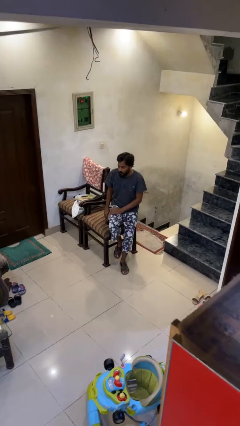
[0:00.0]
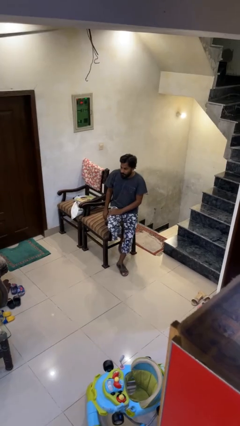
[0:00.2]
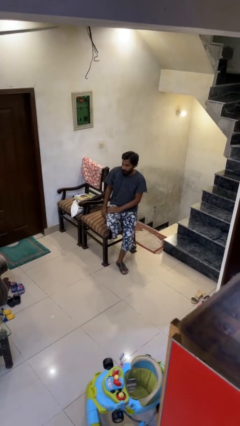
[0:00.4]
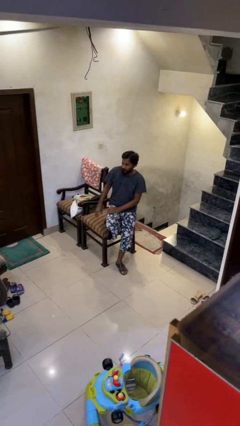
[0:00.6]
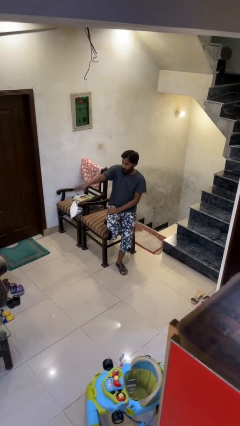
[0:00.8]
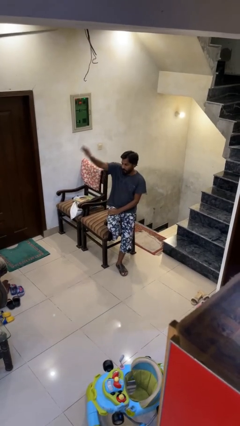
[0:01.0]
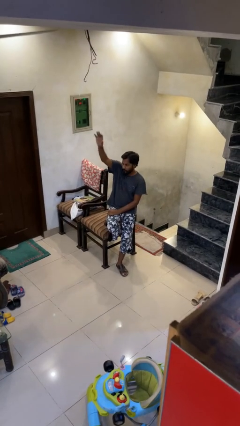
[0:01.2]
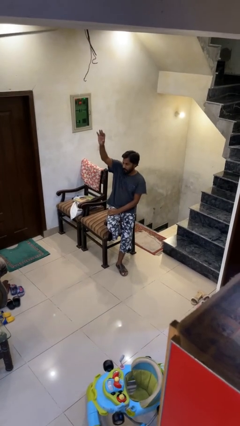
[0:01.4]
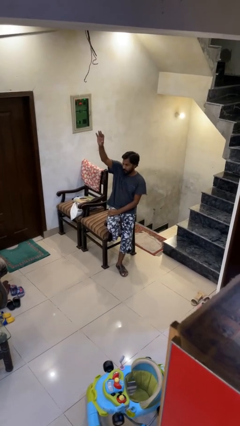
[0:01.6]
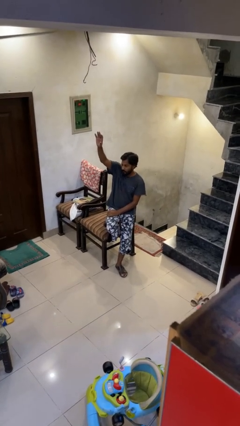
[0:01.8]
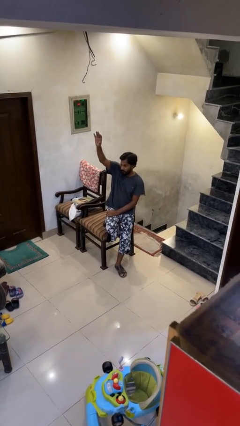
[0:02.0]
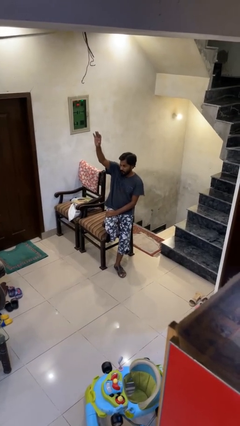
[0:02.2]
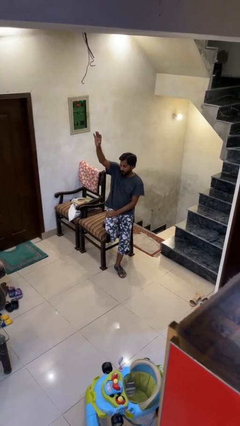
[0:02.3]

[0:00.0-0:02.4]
person gestures raise hand

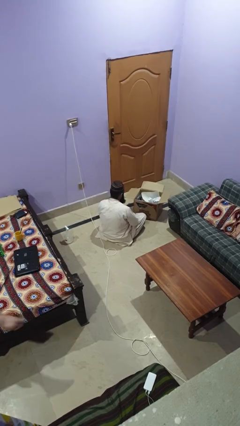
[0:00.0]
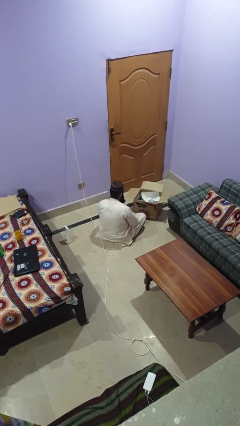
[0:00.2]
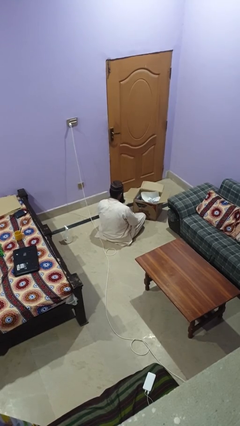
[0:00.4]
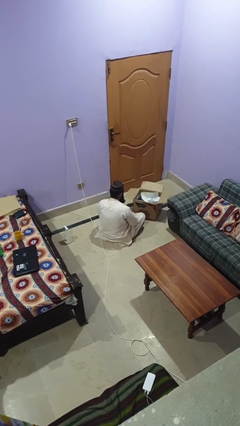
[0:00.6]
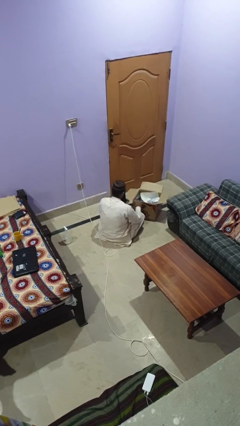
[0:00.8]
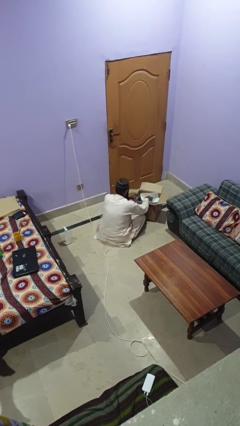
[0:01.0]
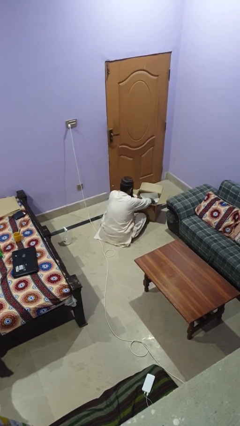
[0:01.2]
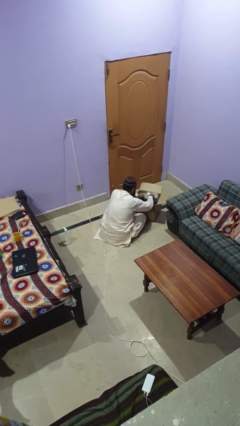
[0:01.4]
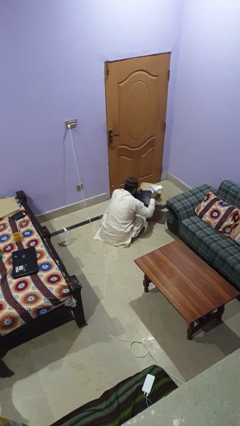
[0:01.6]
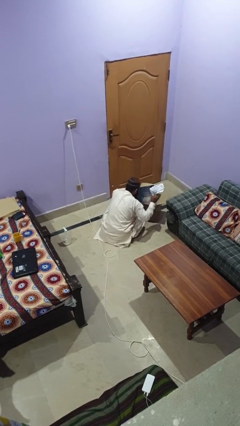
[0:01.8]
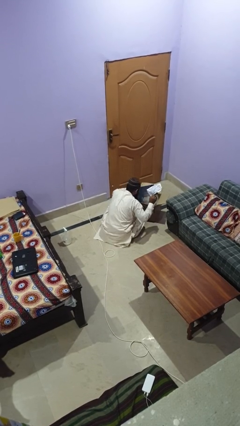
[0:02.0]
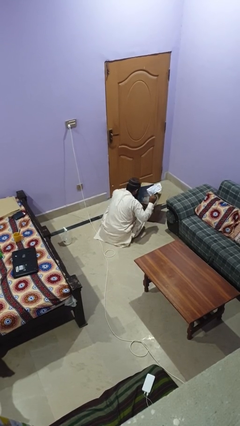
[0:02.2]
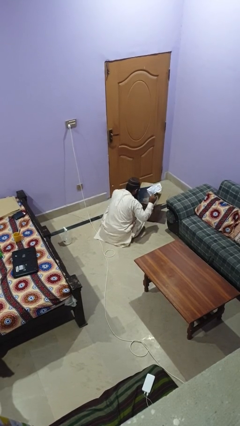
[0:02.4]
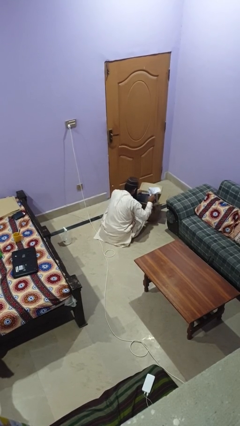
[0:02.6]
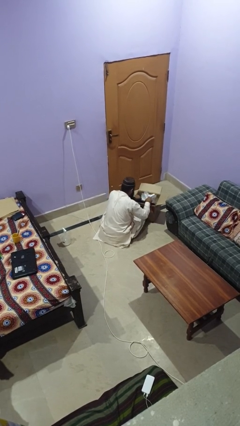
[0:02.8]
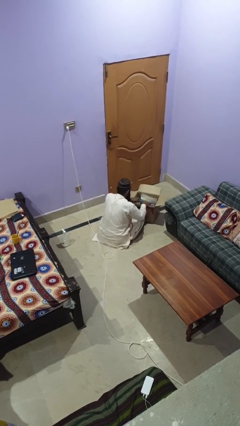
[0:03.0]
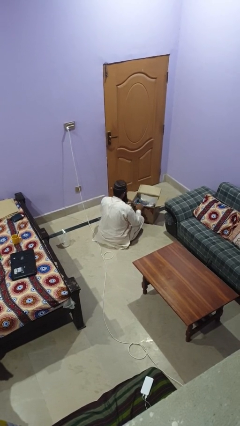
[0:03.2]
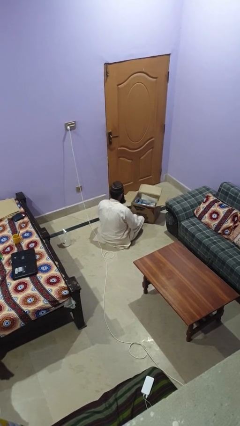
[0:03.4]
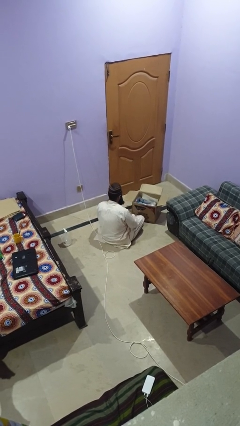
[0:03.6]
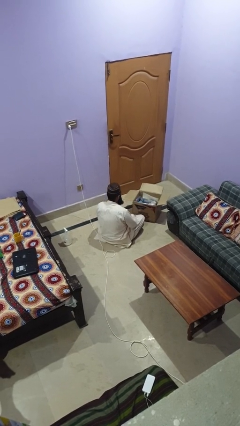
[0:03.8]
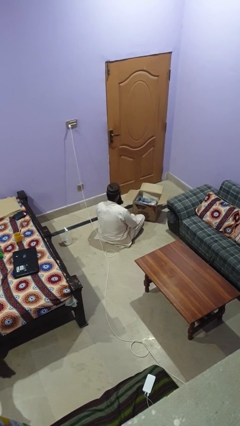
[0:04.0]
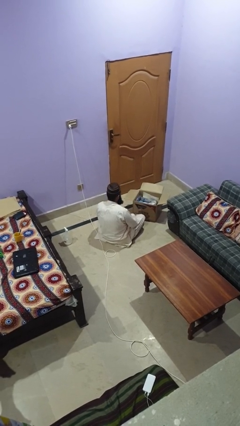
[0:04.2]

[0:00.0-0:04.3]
person searches in box

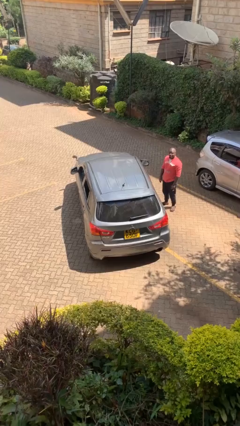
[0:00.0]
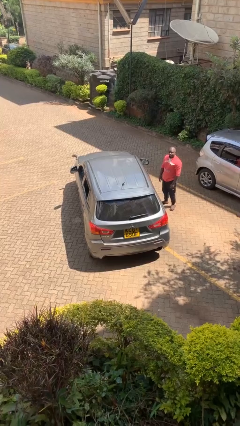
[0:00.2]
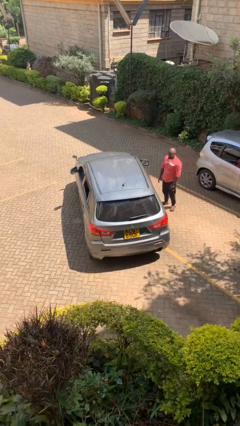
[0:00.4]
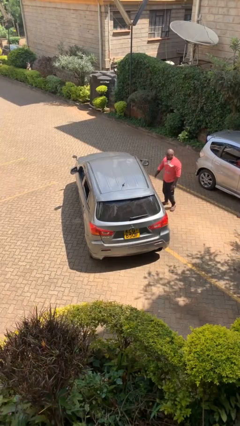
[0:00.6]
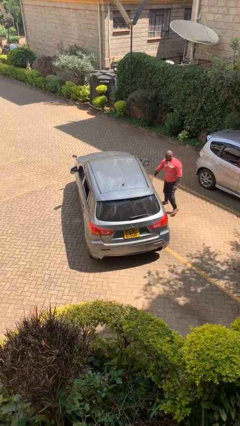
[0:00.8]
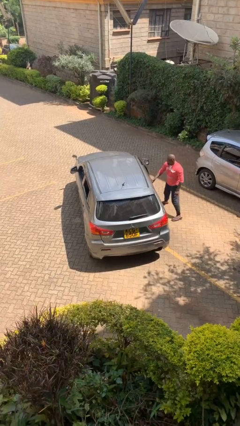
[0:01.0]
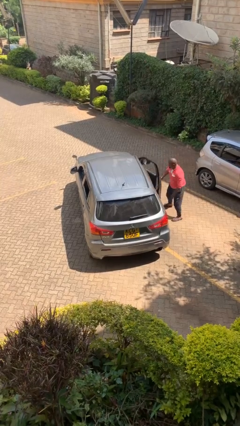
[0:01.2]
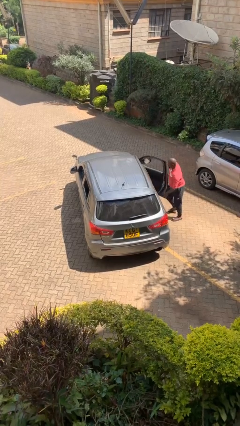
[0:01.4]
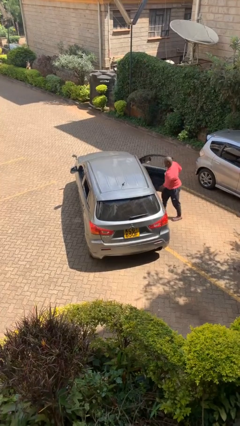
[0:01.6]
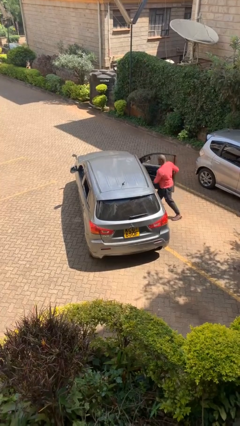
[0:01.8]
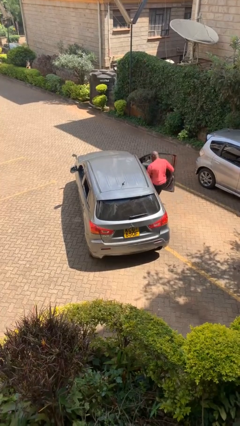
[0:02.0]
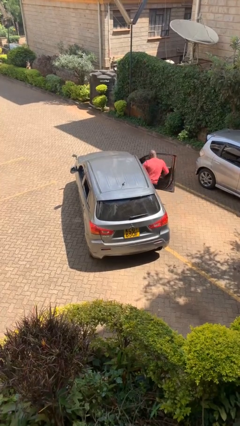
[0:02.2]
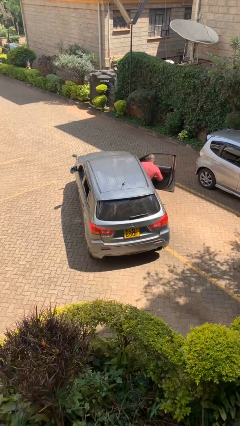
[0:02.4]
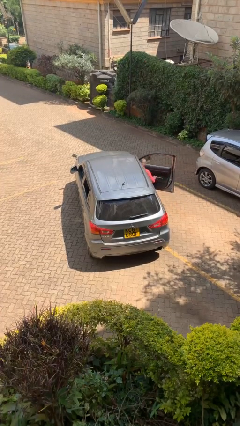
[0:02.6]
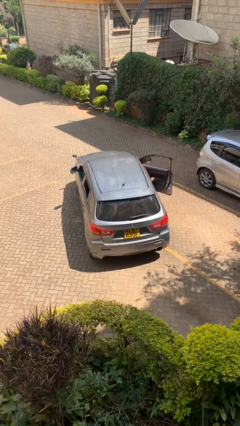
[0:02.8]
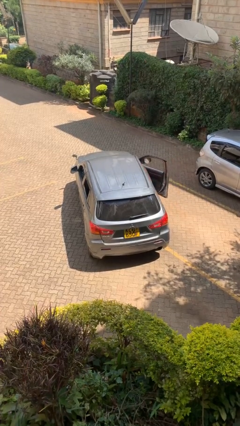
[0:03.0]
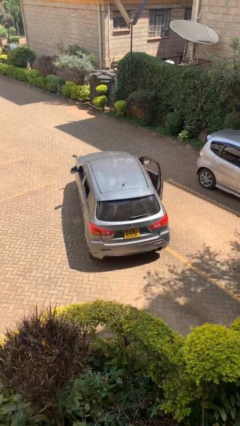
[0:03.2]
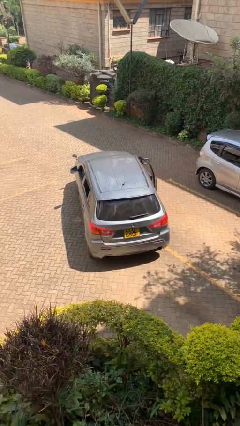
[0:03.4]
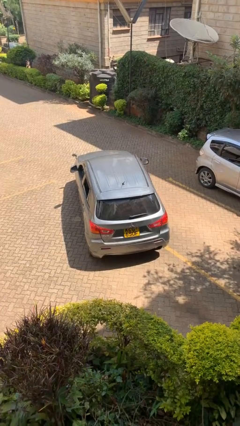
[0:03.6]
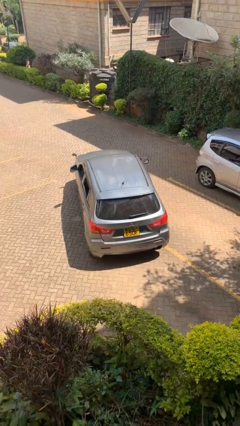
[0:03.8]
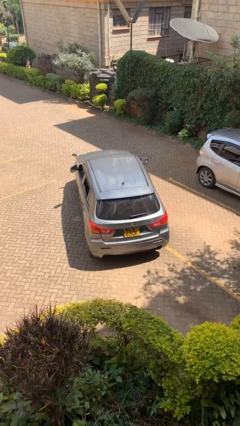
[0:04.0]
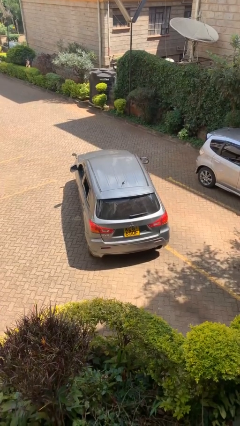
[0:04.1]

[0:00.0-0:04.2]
car picks up person

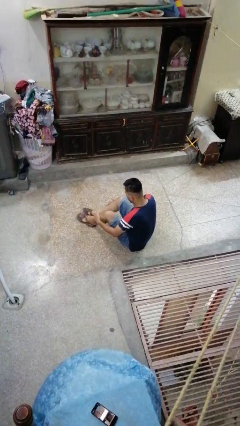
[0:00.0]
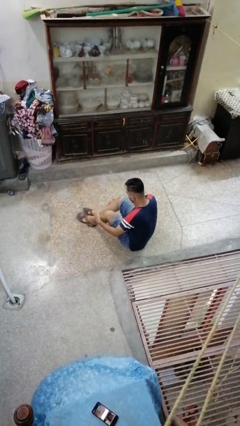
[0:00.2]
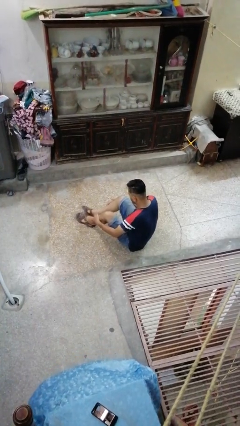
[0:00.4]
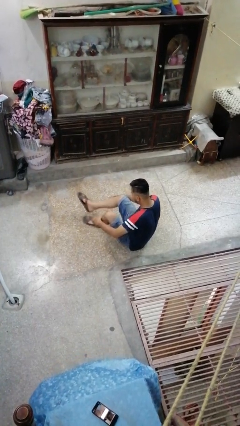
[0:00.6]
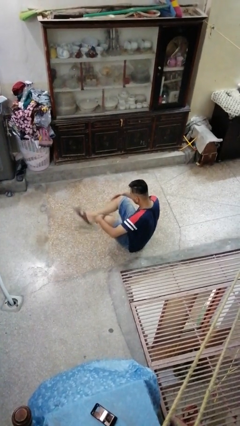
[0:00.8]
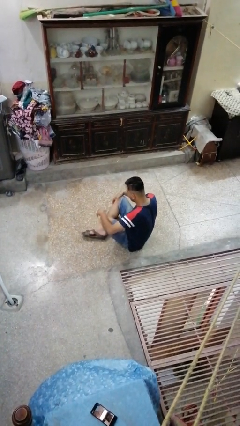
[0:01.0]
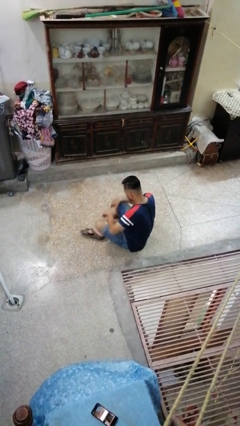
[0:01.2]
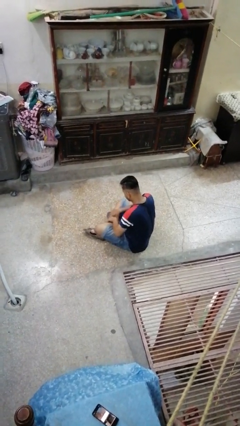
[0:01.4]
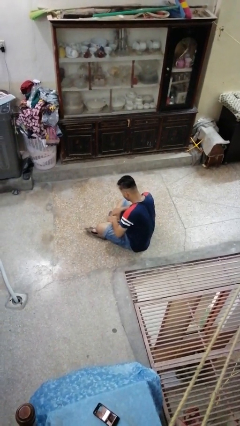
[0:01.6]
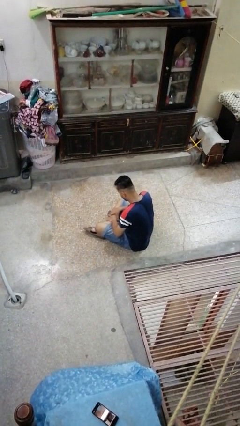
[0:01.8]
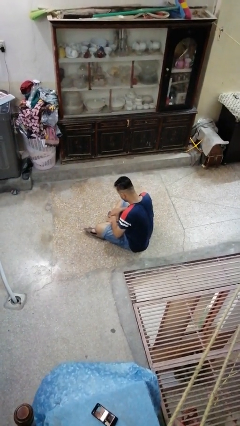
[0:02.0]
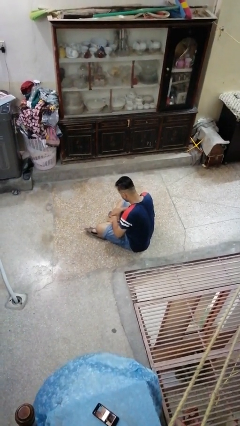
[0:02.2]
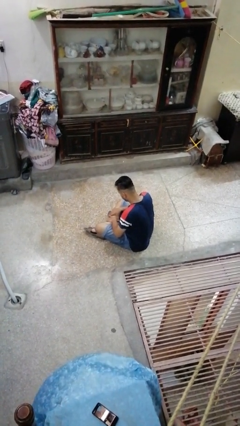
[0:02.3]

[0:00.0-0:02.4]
person crosses legs

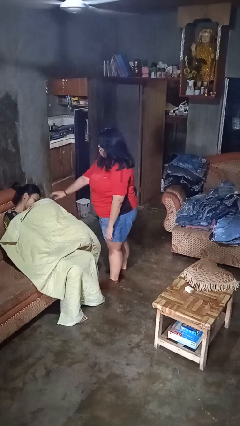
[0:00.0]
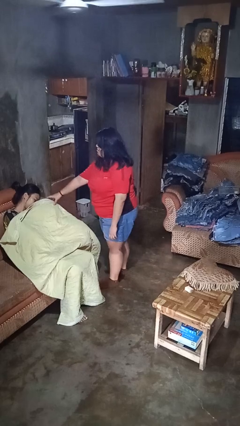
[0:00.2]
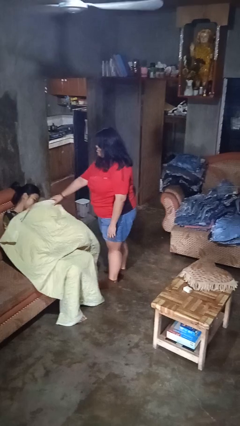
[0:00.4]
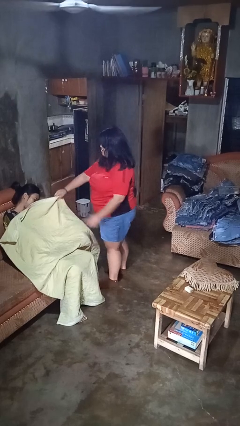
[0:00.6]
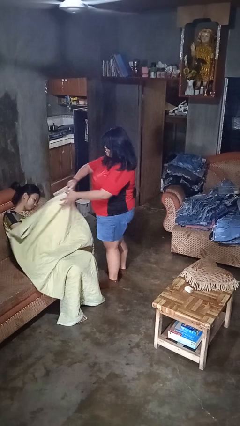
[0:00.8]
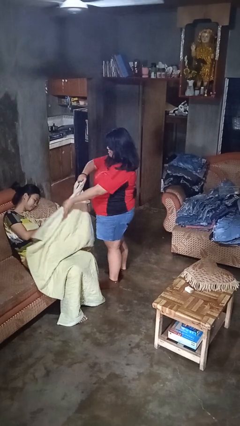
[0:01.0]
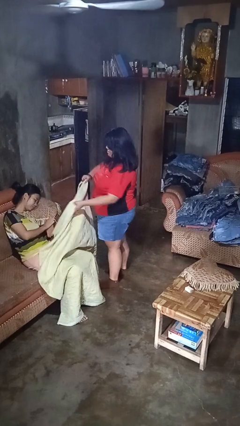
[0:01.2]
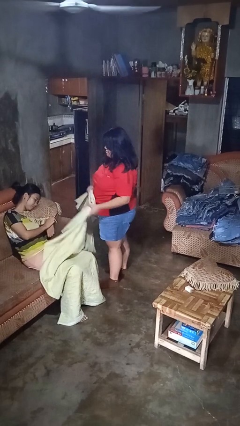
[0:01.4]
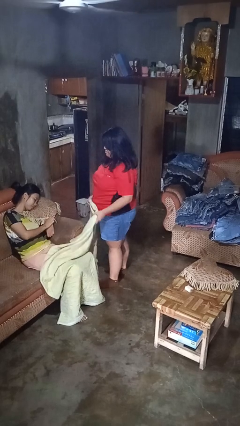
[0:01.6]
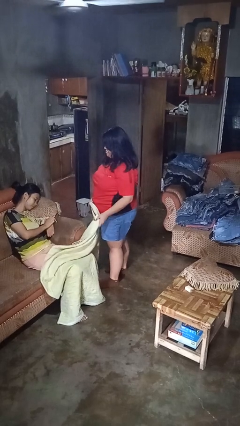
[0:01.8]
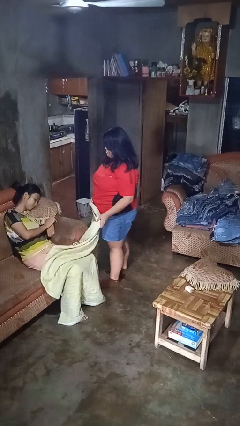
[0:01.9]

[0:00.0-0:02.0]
person uncovers friend with blanket

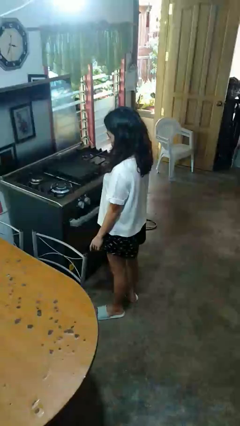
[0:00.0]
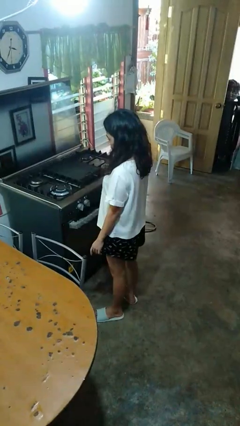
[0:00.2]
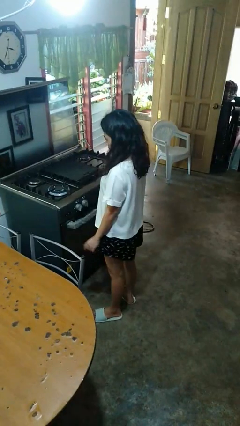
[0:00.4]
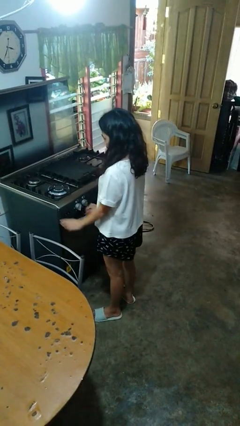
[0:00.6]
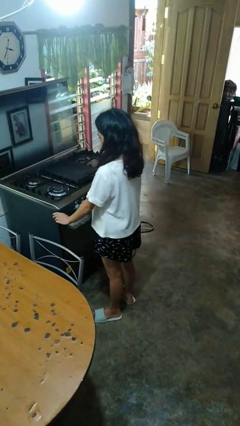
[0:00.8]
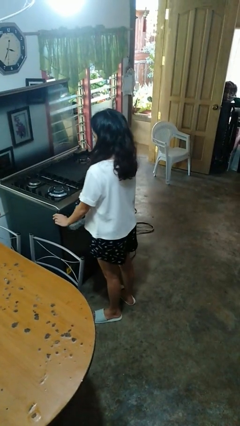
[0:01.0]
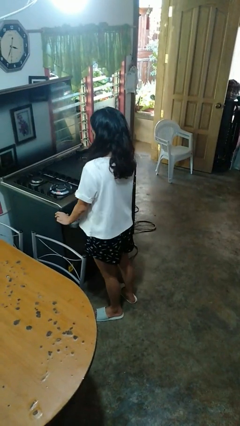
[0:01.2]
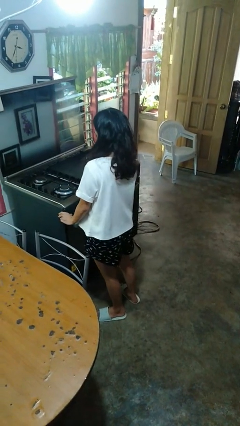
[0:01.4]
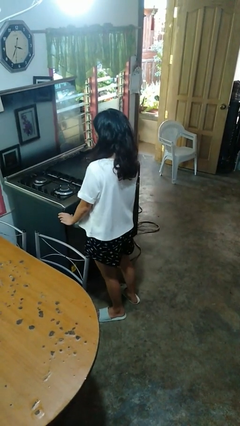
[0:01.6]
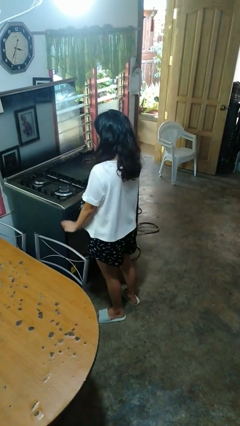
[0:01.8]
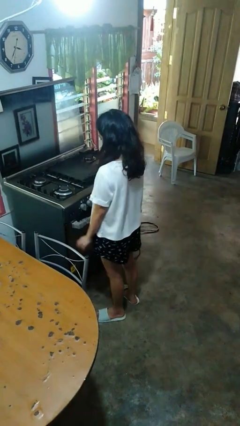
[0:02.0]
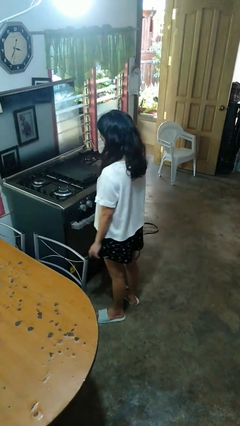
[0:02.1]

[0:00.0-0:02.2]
person turns off stovetop
